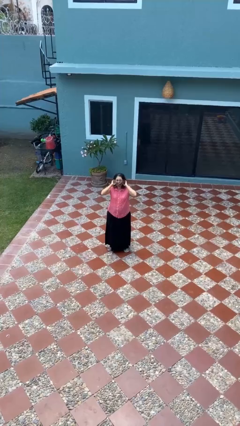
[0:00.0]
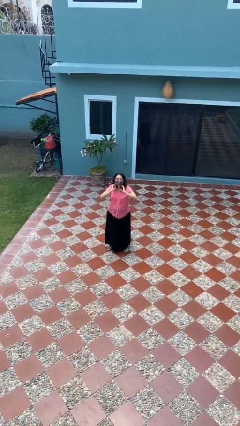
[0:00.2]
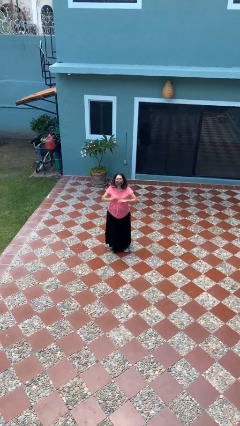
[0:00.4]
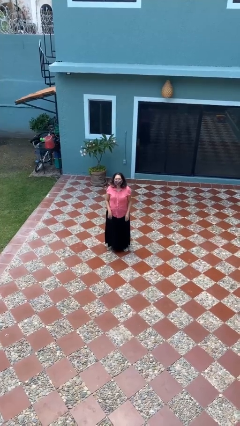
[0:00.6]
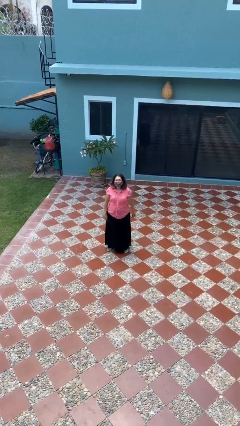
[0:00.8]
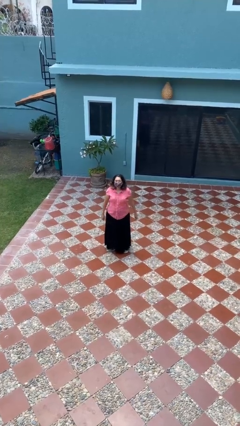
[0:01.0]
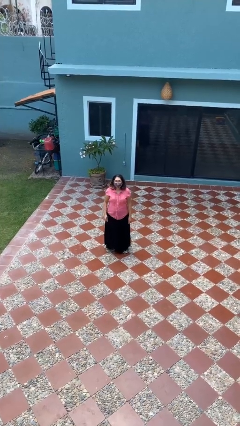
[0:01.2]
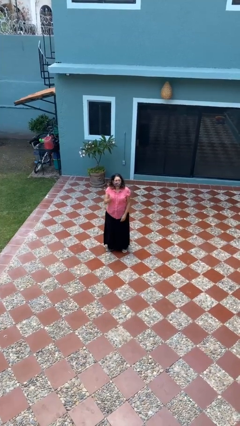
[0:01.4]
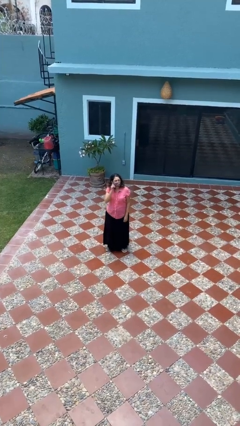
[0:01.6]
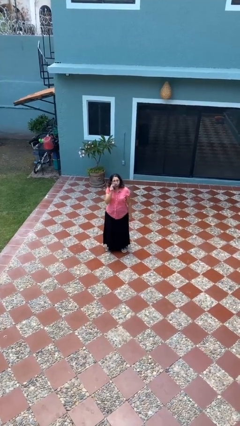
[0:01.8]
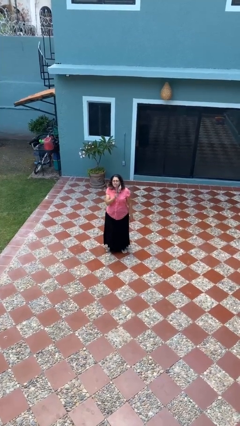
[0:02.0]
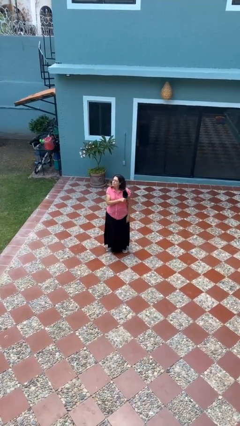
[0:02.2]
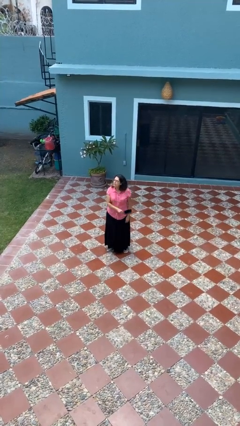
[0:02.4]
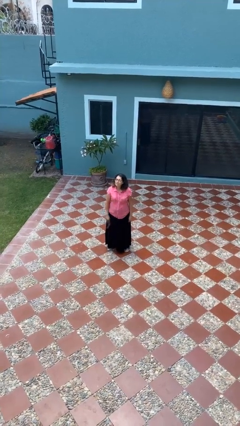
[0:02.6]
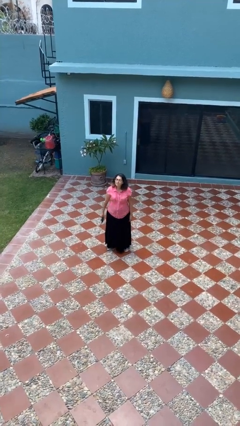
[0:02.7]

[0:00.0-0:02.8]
person takes off facemask

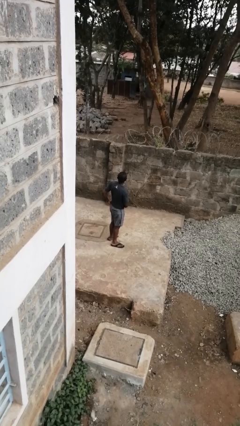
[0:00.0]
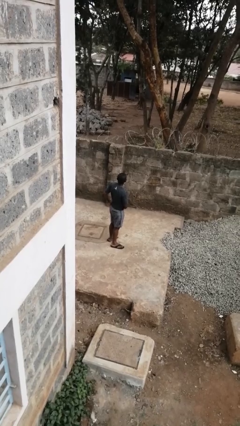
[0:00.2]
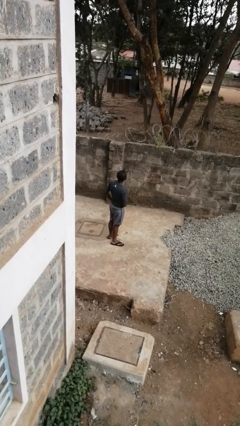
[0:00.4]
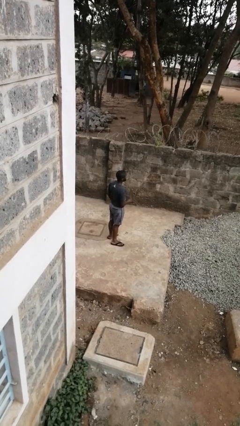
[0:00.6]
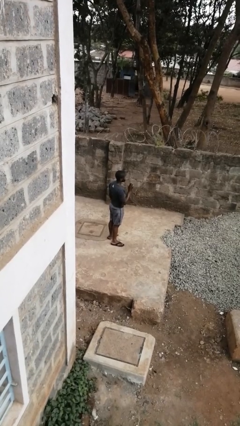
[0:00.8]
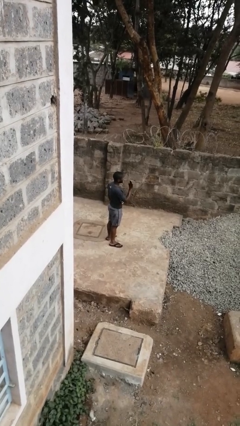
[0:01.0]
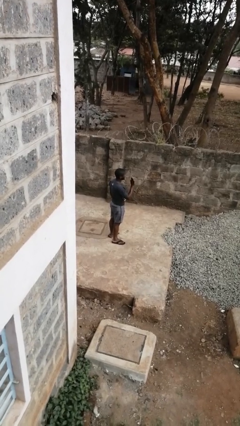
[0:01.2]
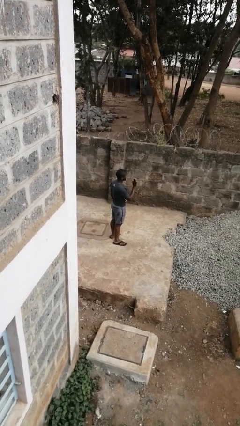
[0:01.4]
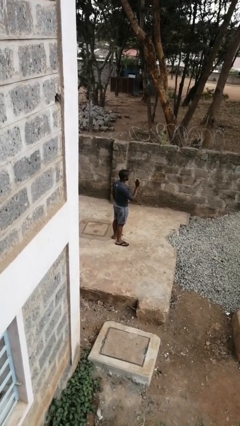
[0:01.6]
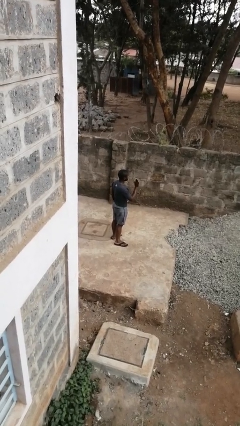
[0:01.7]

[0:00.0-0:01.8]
person gestures stop

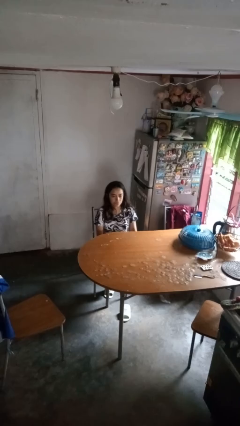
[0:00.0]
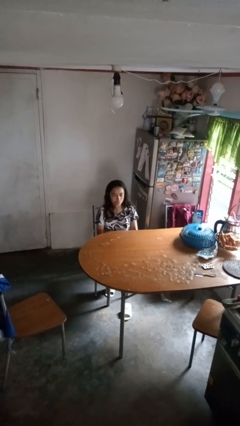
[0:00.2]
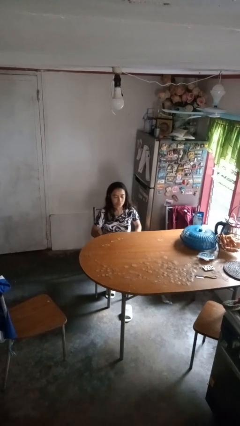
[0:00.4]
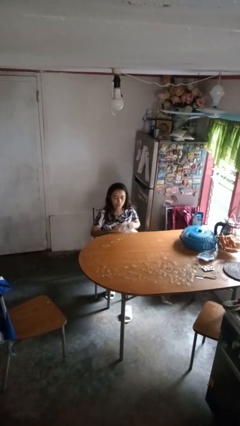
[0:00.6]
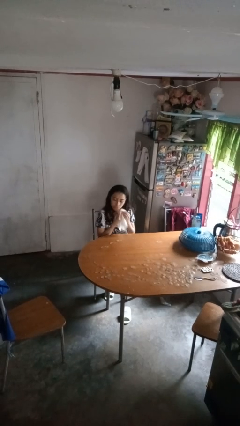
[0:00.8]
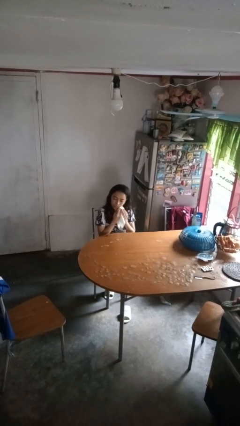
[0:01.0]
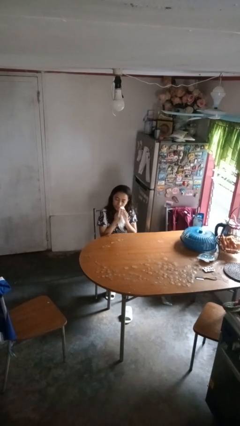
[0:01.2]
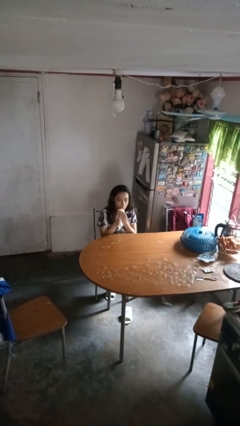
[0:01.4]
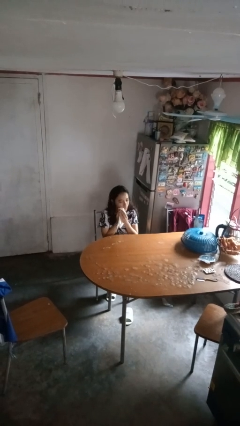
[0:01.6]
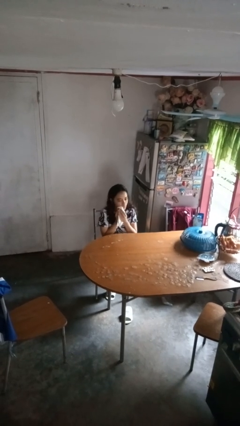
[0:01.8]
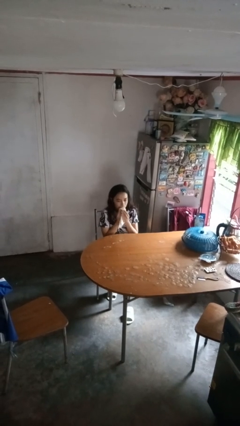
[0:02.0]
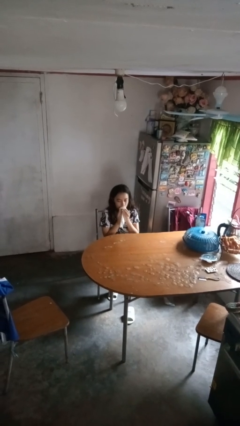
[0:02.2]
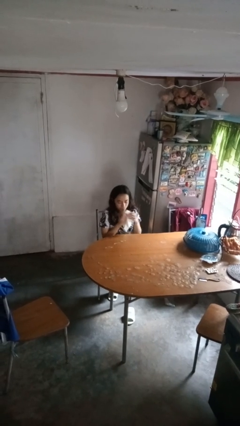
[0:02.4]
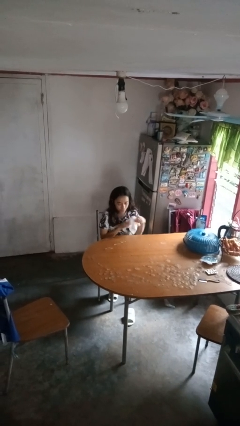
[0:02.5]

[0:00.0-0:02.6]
person wipes mouth with napkin

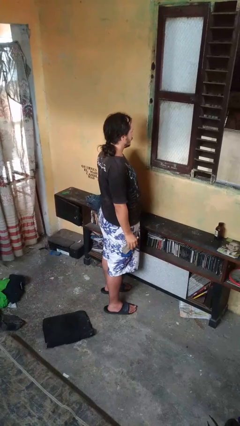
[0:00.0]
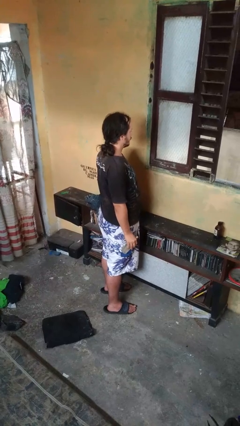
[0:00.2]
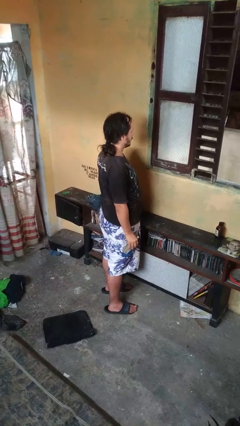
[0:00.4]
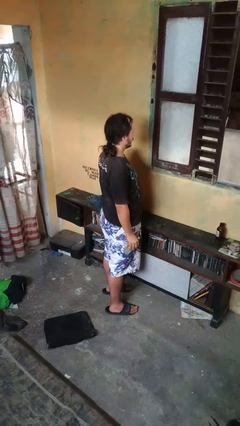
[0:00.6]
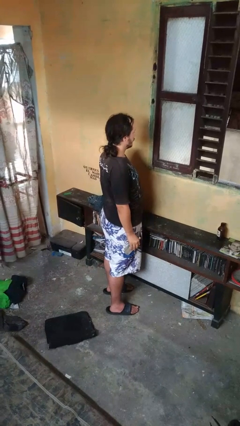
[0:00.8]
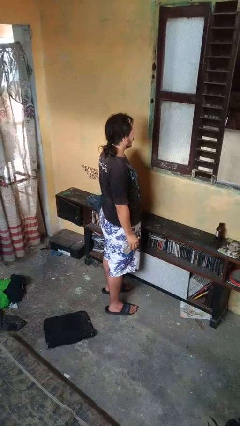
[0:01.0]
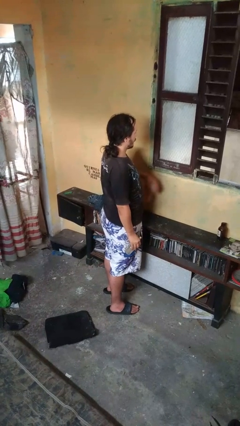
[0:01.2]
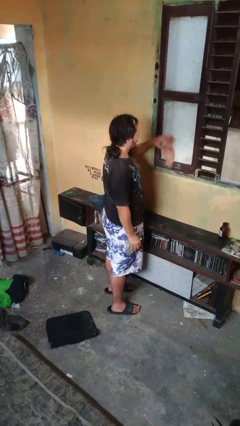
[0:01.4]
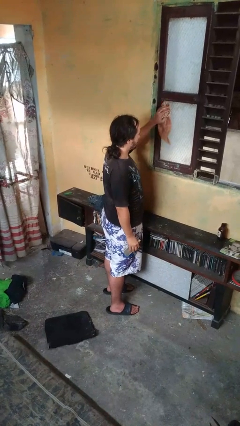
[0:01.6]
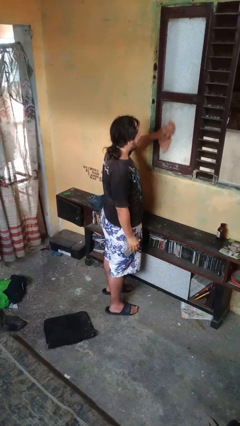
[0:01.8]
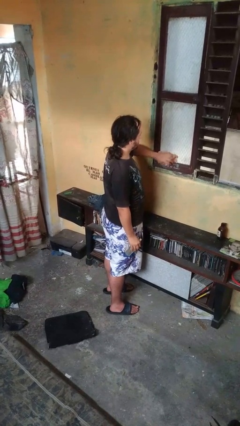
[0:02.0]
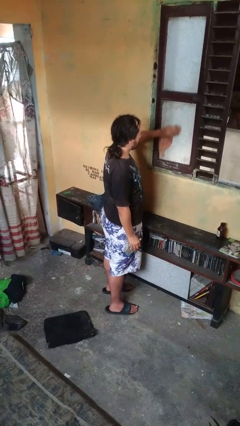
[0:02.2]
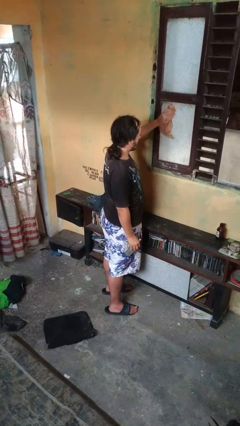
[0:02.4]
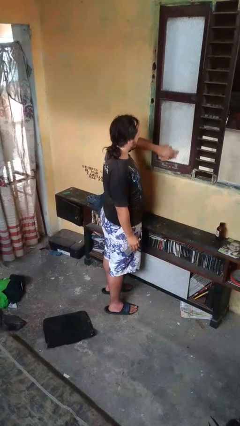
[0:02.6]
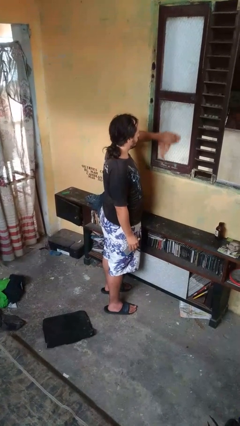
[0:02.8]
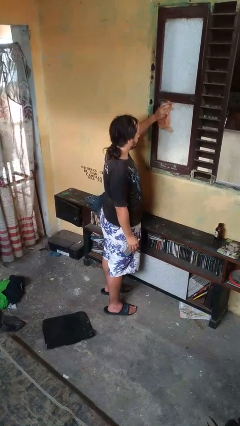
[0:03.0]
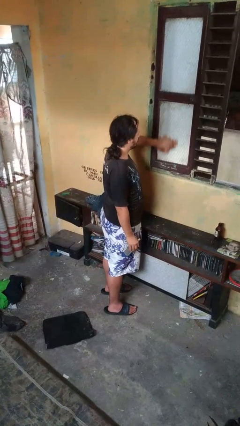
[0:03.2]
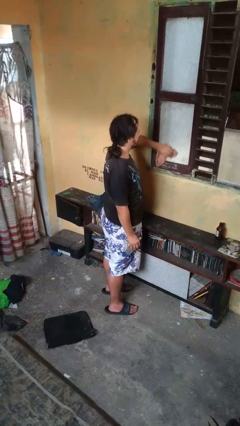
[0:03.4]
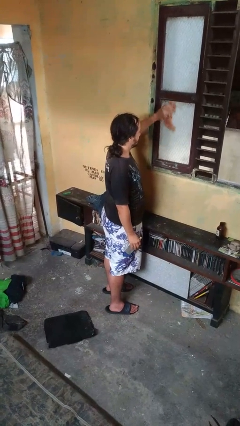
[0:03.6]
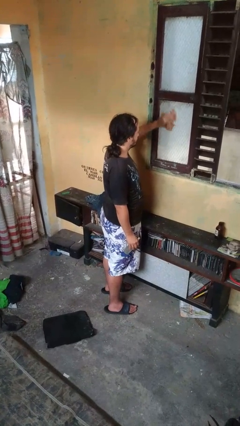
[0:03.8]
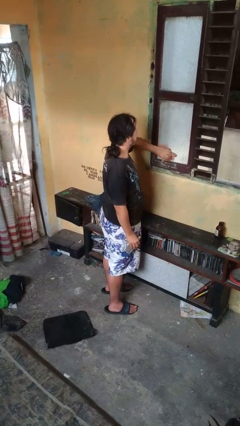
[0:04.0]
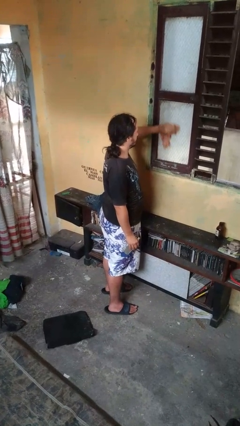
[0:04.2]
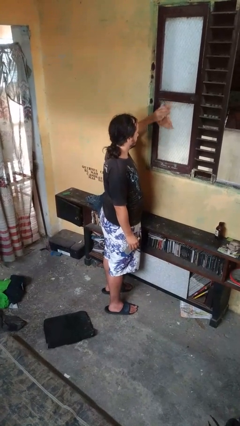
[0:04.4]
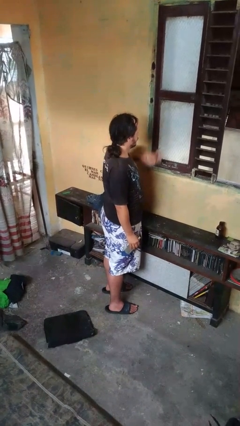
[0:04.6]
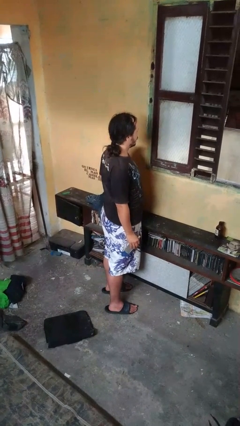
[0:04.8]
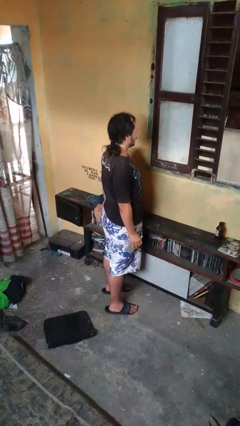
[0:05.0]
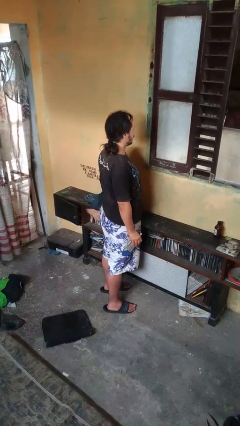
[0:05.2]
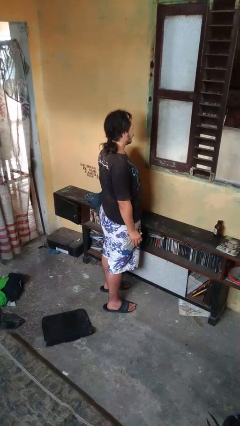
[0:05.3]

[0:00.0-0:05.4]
person washes window

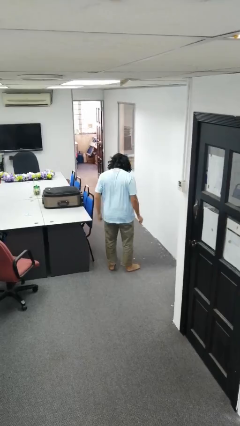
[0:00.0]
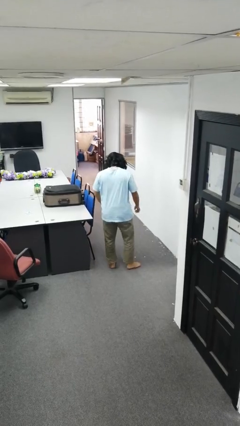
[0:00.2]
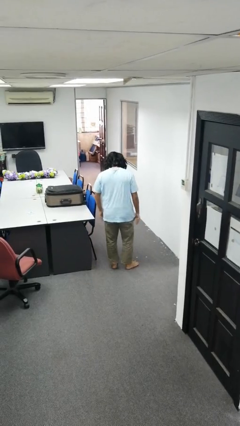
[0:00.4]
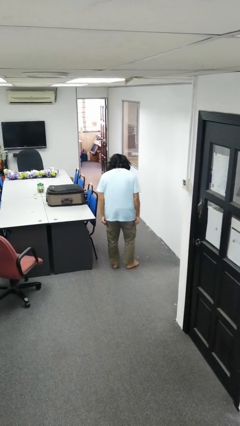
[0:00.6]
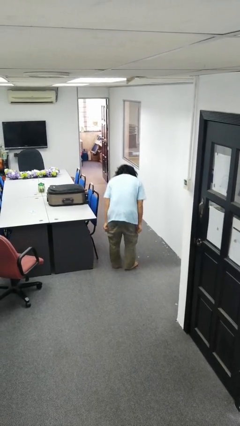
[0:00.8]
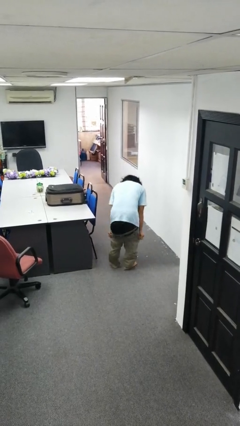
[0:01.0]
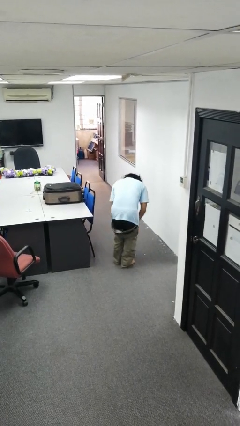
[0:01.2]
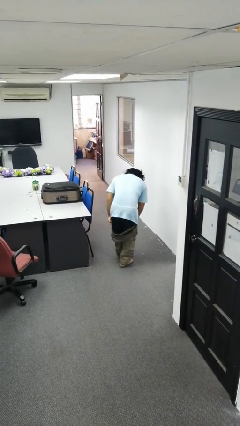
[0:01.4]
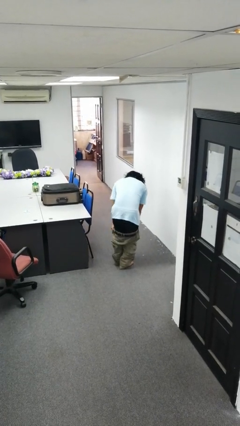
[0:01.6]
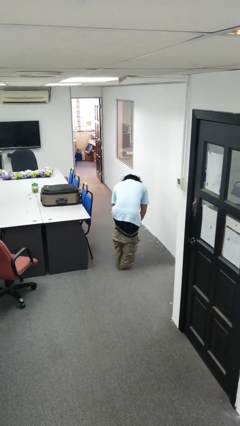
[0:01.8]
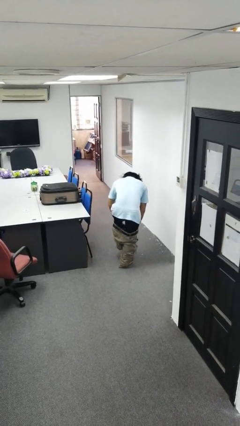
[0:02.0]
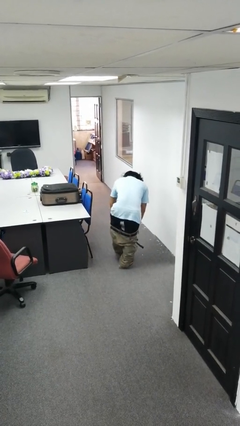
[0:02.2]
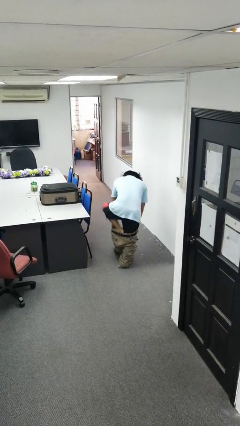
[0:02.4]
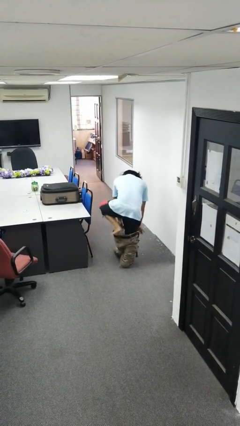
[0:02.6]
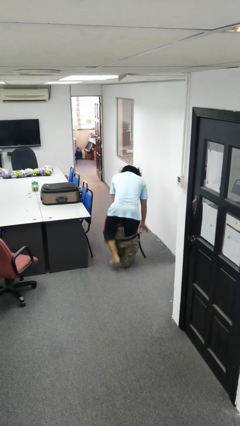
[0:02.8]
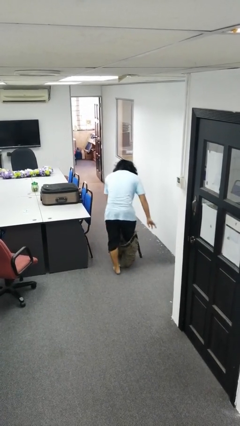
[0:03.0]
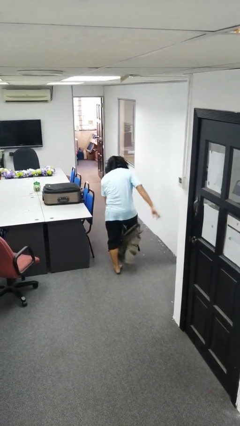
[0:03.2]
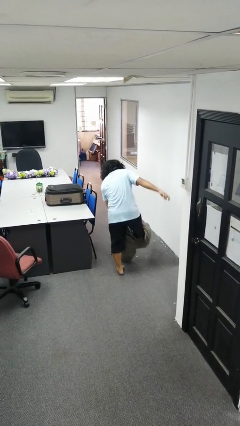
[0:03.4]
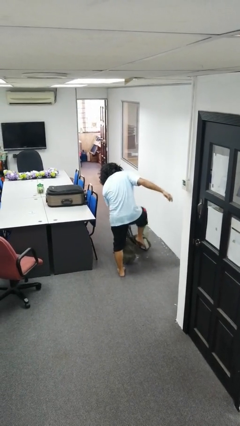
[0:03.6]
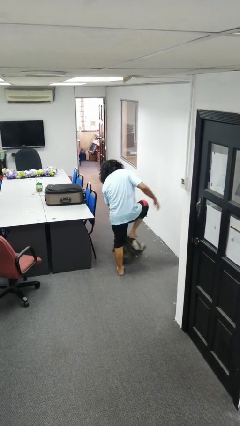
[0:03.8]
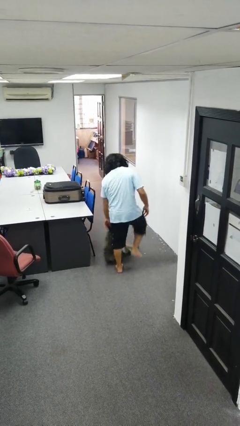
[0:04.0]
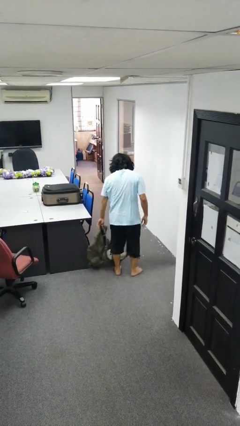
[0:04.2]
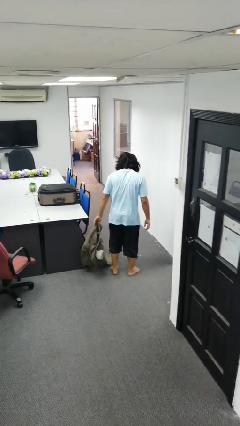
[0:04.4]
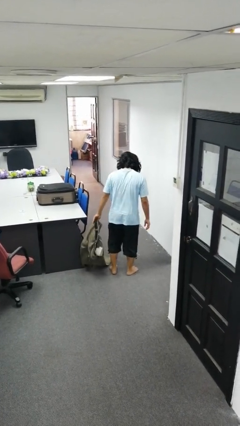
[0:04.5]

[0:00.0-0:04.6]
person puts on pants

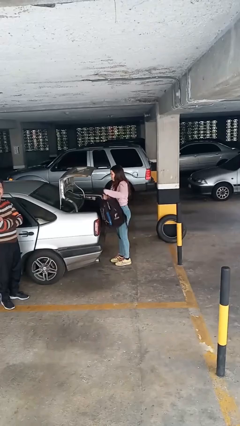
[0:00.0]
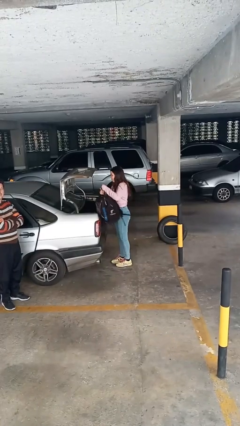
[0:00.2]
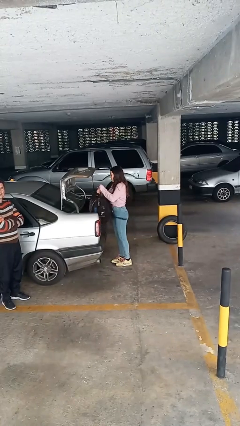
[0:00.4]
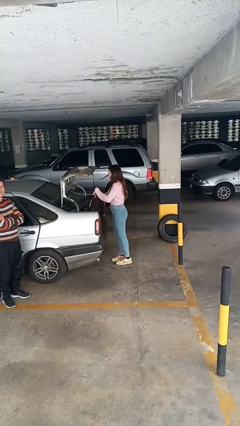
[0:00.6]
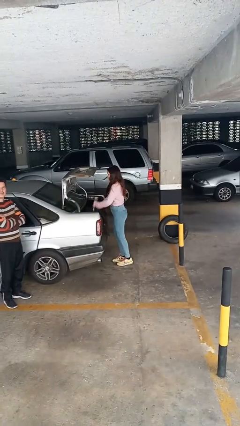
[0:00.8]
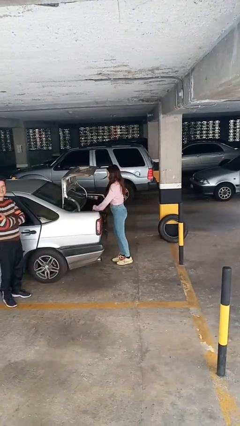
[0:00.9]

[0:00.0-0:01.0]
person loads car
